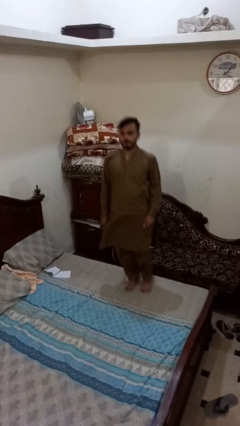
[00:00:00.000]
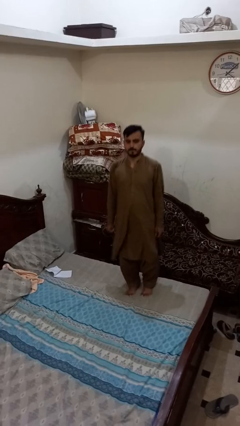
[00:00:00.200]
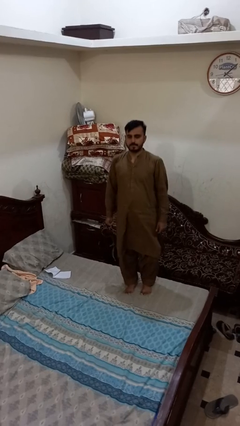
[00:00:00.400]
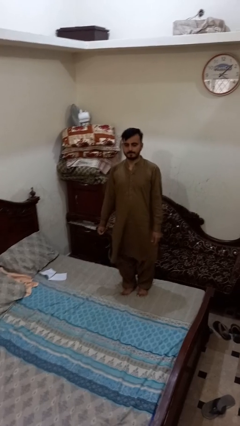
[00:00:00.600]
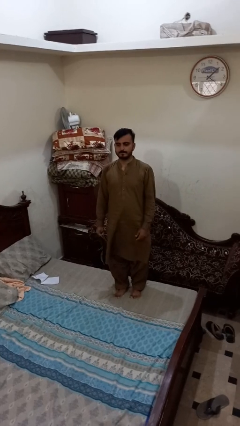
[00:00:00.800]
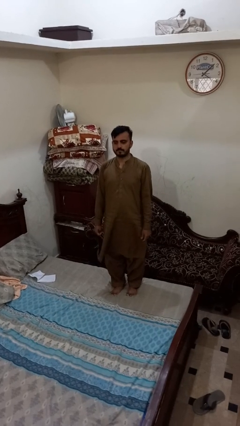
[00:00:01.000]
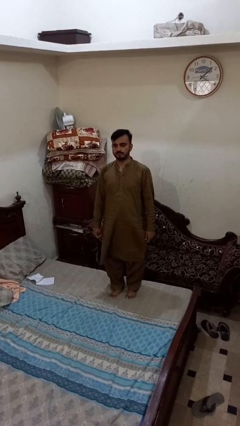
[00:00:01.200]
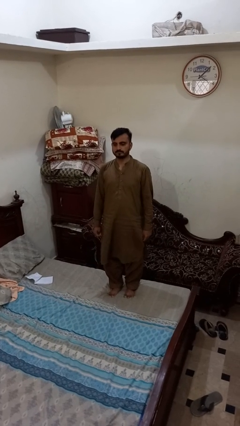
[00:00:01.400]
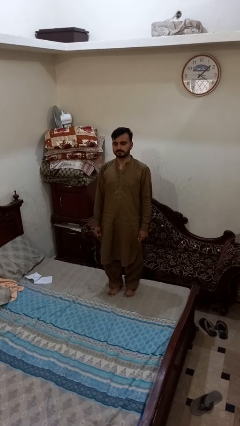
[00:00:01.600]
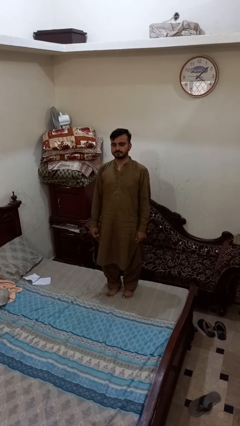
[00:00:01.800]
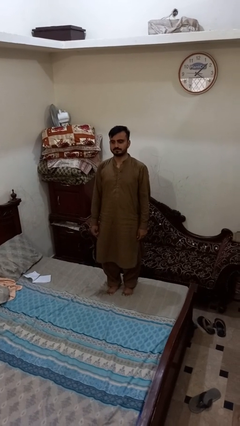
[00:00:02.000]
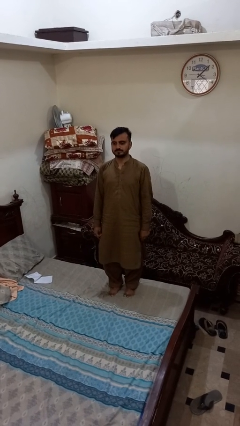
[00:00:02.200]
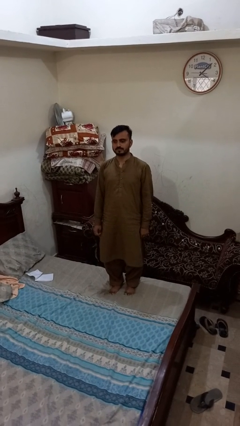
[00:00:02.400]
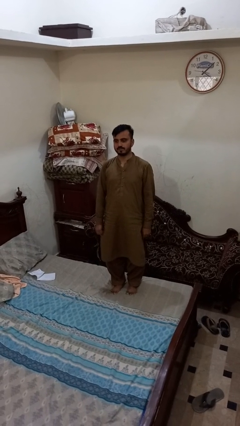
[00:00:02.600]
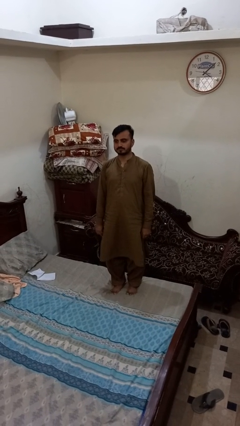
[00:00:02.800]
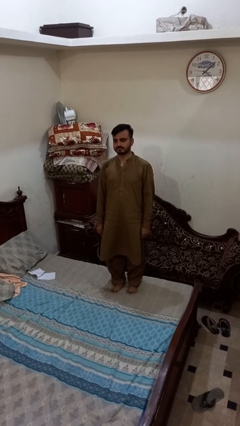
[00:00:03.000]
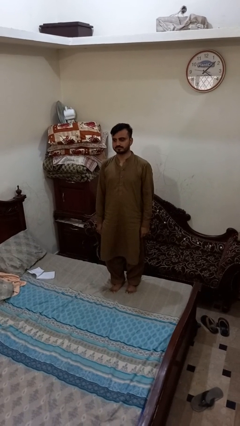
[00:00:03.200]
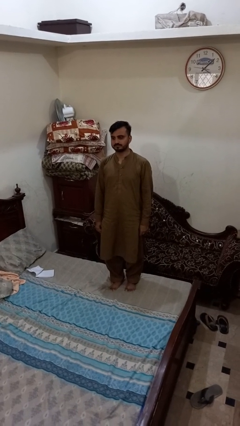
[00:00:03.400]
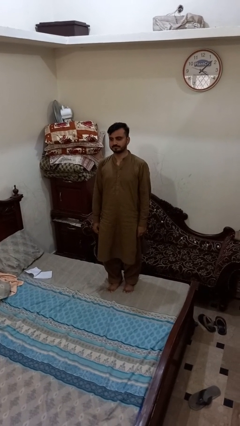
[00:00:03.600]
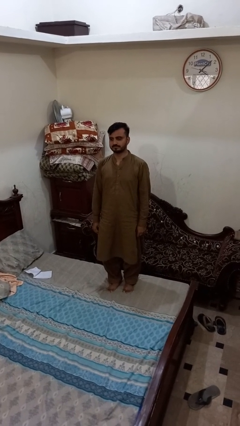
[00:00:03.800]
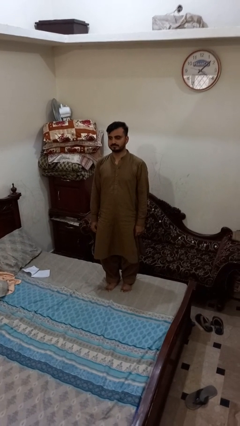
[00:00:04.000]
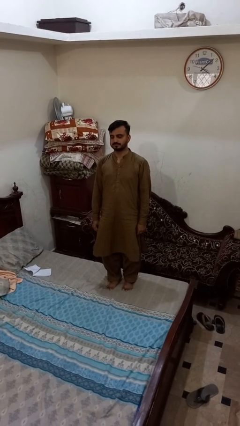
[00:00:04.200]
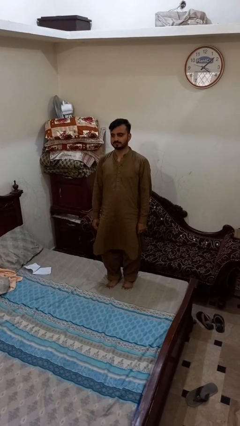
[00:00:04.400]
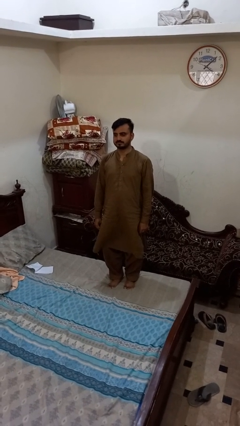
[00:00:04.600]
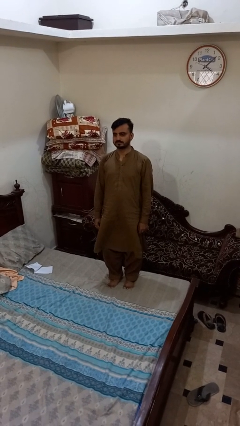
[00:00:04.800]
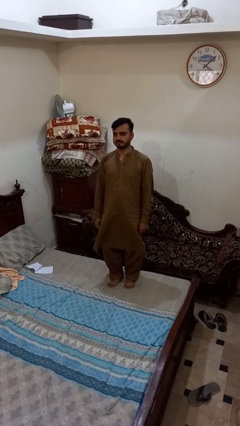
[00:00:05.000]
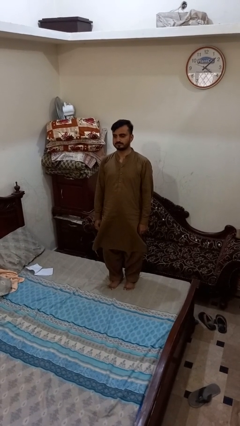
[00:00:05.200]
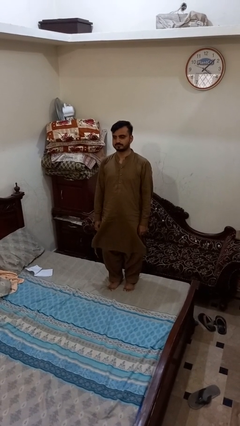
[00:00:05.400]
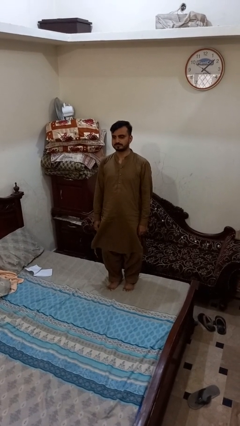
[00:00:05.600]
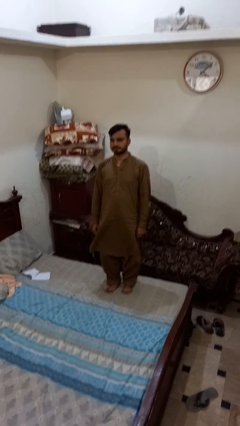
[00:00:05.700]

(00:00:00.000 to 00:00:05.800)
person jumps on bed

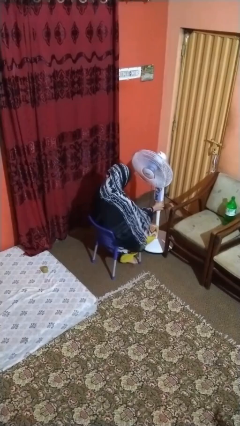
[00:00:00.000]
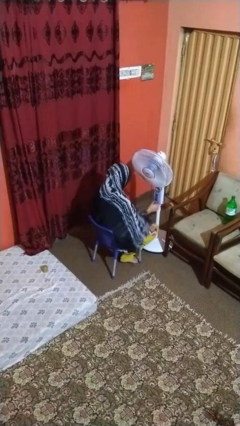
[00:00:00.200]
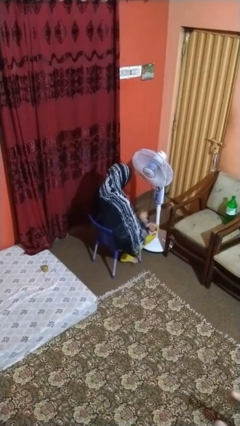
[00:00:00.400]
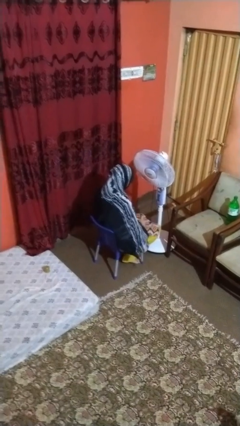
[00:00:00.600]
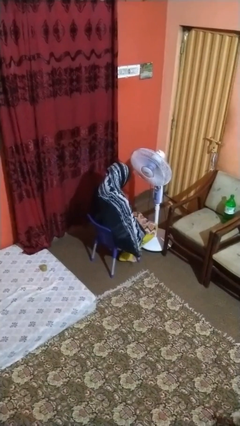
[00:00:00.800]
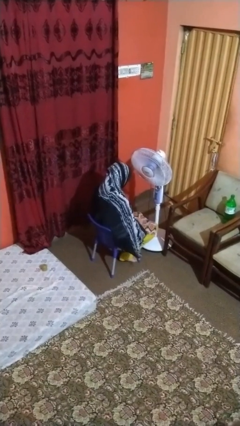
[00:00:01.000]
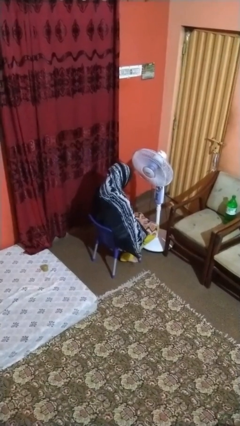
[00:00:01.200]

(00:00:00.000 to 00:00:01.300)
person turns off fan

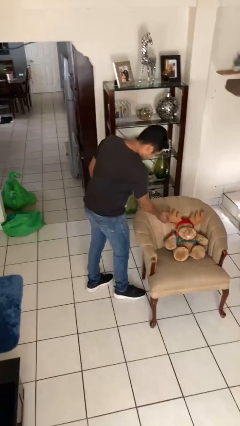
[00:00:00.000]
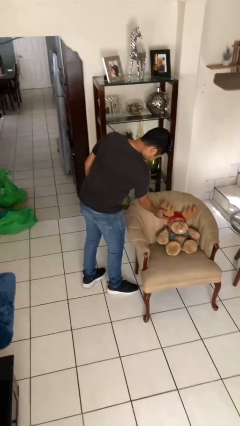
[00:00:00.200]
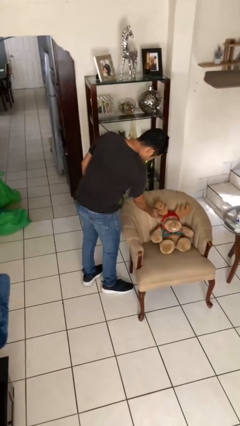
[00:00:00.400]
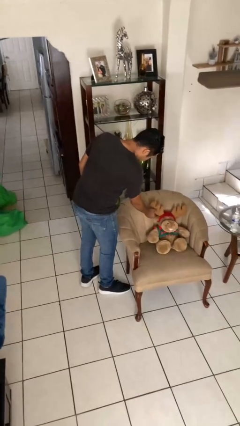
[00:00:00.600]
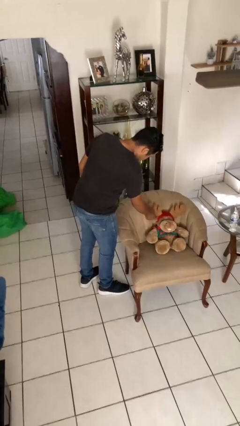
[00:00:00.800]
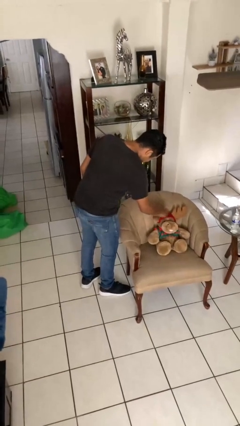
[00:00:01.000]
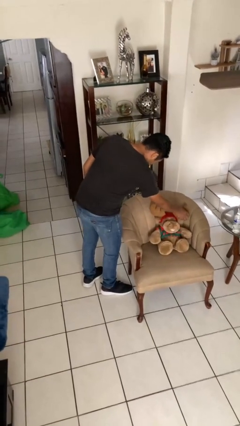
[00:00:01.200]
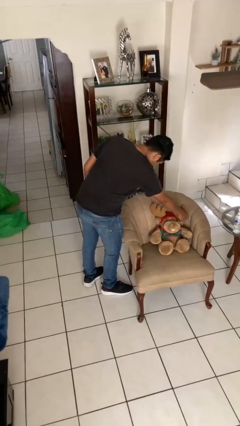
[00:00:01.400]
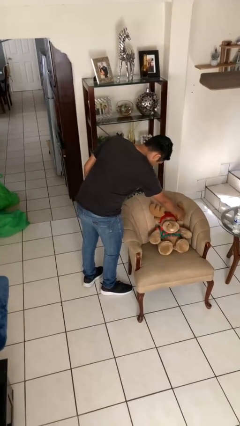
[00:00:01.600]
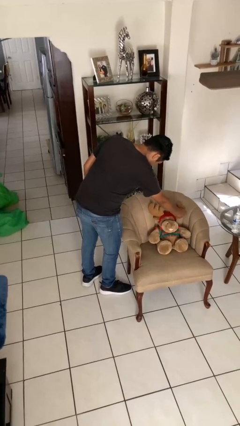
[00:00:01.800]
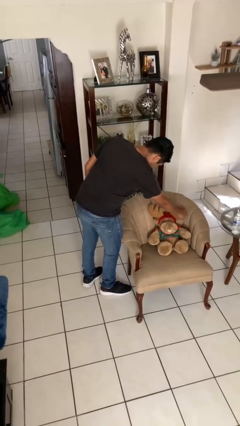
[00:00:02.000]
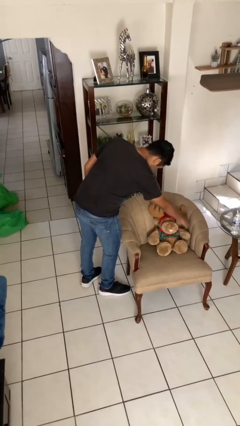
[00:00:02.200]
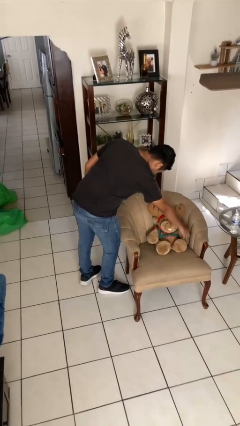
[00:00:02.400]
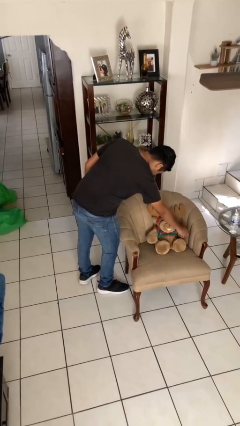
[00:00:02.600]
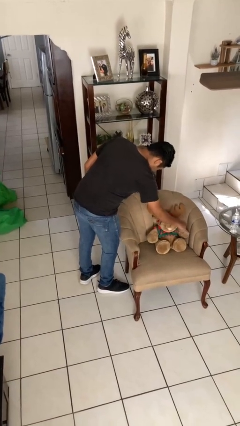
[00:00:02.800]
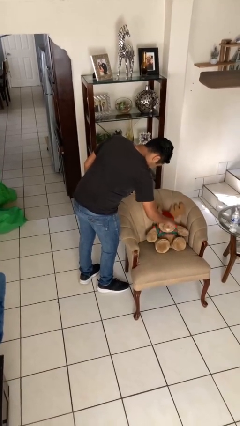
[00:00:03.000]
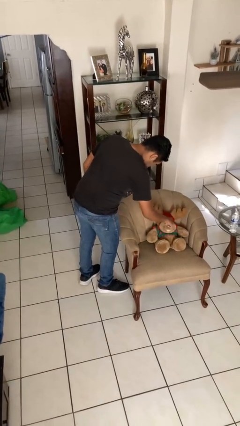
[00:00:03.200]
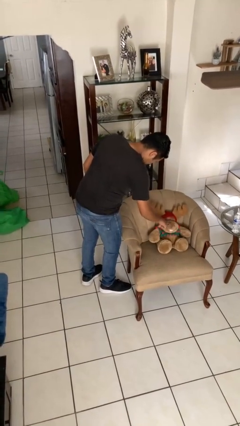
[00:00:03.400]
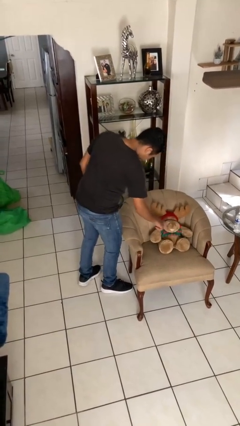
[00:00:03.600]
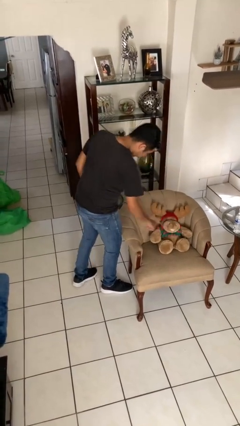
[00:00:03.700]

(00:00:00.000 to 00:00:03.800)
person taps object with finger

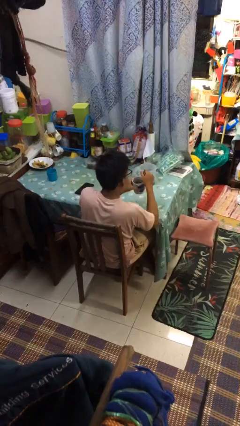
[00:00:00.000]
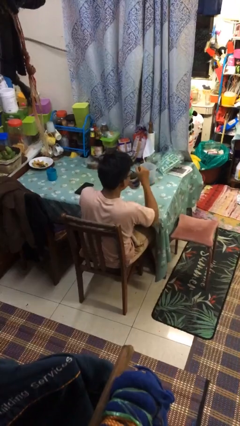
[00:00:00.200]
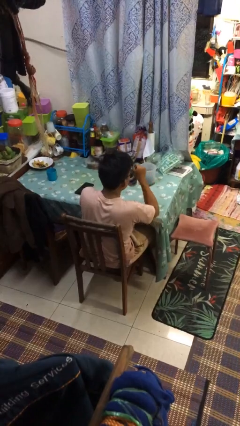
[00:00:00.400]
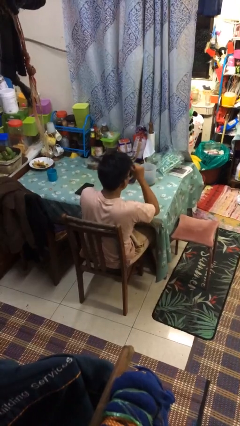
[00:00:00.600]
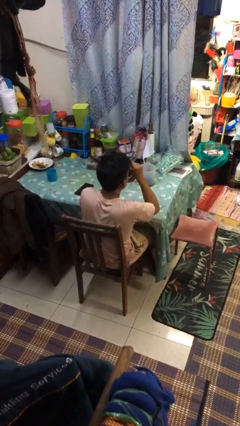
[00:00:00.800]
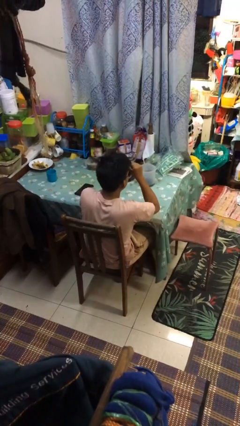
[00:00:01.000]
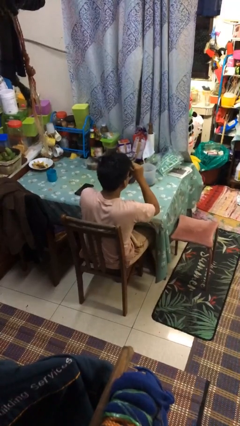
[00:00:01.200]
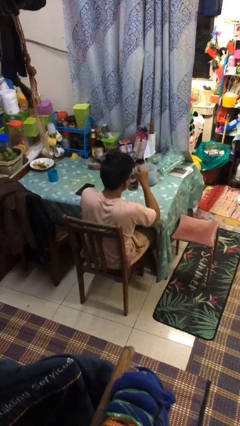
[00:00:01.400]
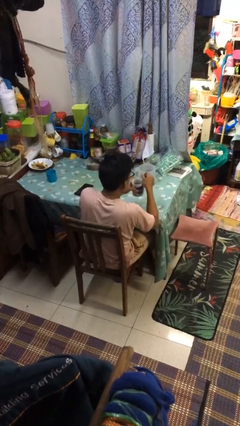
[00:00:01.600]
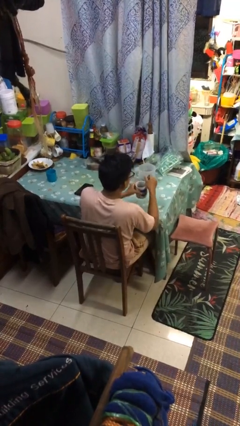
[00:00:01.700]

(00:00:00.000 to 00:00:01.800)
person drinks from mug

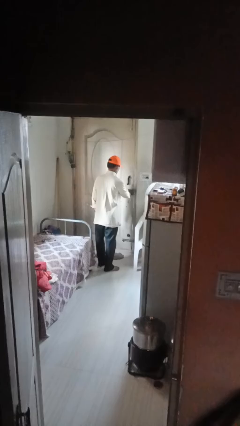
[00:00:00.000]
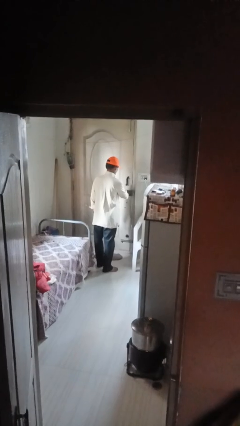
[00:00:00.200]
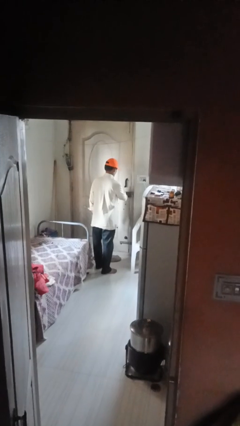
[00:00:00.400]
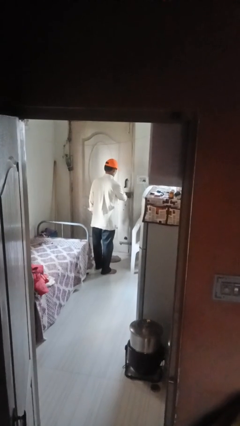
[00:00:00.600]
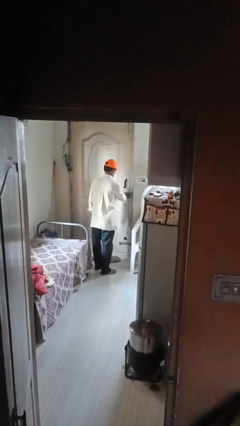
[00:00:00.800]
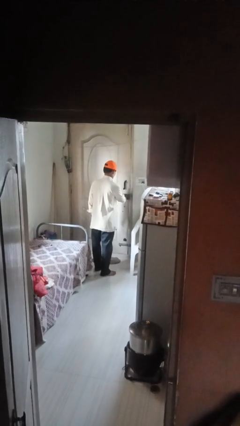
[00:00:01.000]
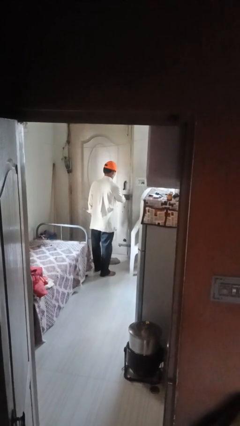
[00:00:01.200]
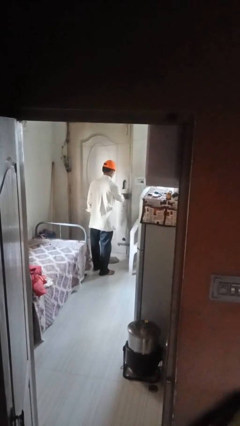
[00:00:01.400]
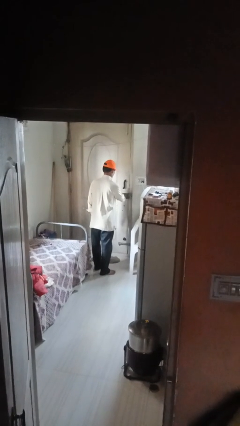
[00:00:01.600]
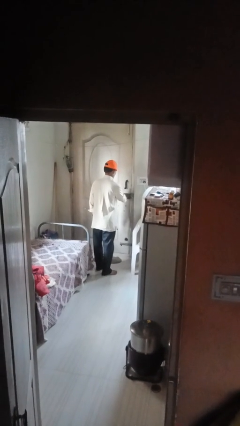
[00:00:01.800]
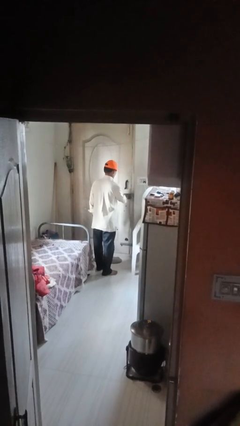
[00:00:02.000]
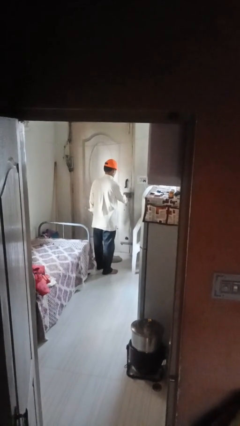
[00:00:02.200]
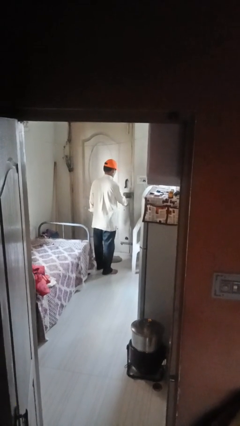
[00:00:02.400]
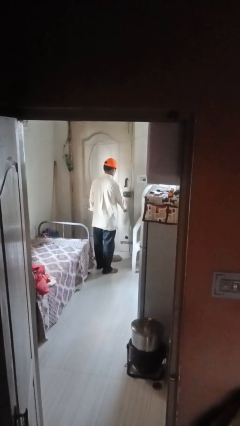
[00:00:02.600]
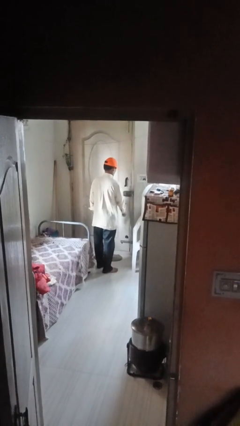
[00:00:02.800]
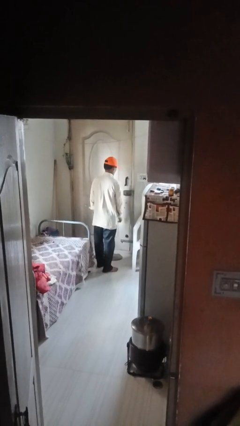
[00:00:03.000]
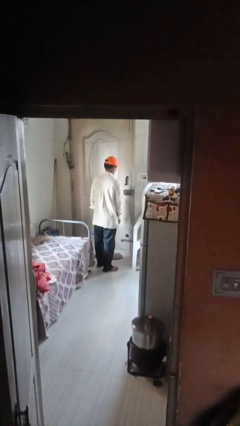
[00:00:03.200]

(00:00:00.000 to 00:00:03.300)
person locks door with keys

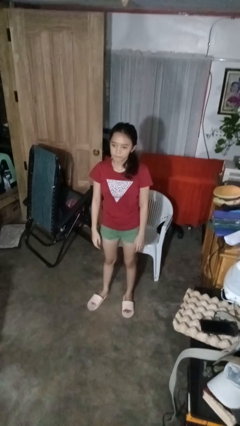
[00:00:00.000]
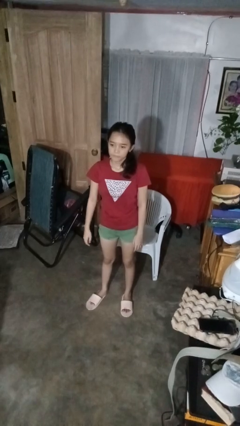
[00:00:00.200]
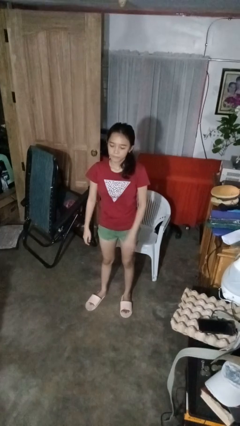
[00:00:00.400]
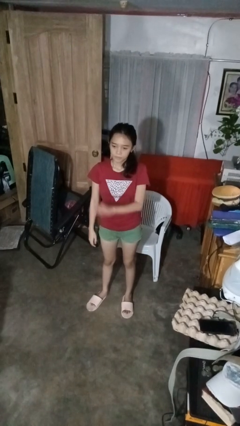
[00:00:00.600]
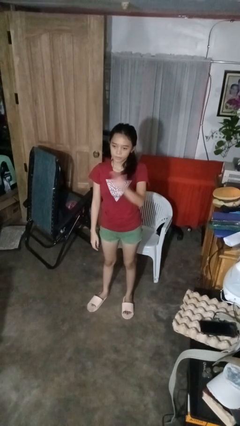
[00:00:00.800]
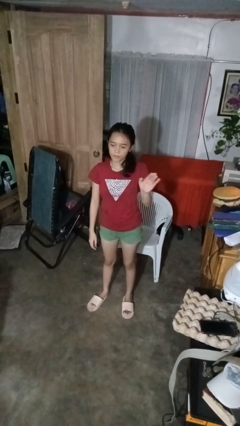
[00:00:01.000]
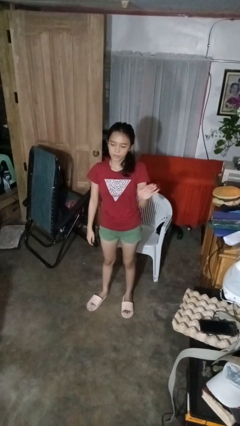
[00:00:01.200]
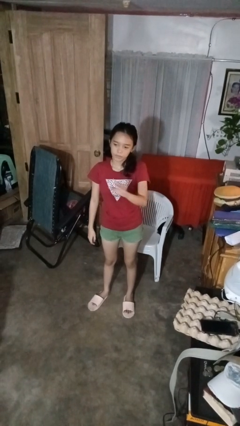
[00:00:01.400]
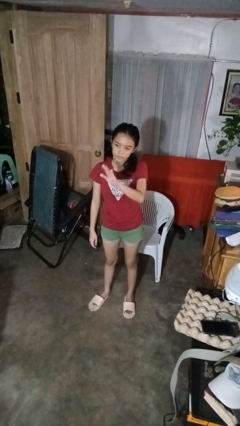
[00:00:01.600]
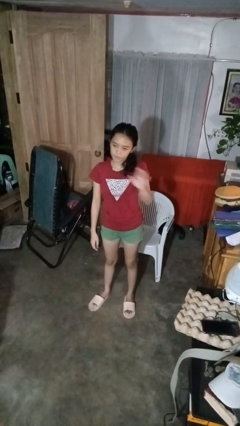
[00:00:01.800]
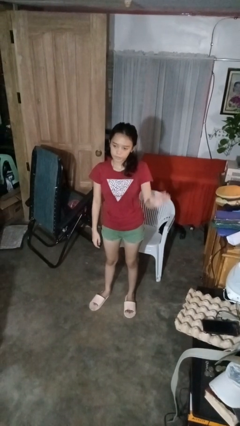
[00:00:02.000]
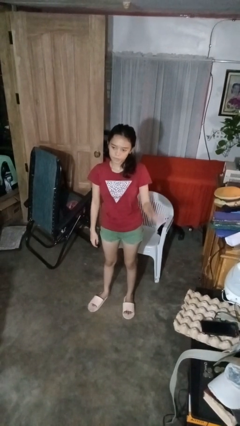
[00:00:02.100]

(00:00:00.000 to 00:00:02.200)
person gestures swipe left
